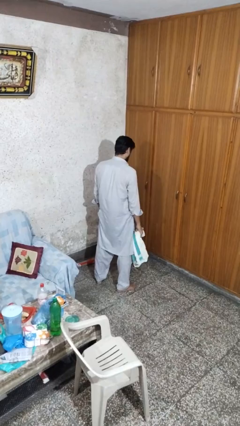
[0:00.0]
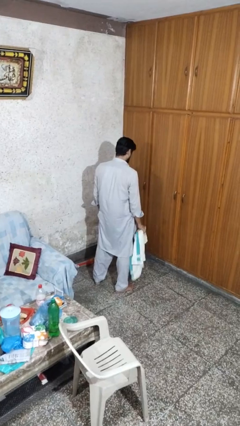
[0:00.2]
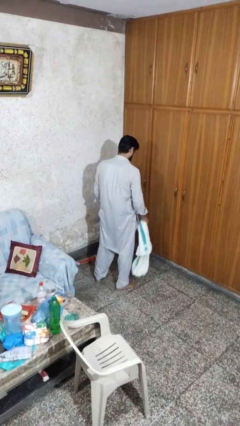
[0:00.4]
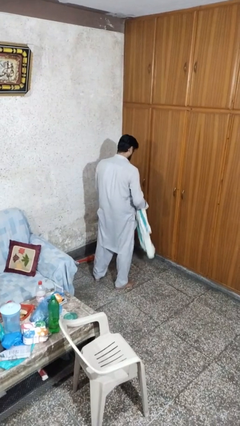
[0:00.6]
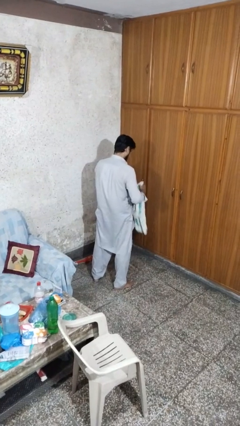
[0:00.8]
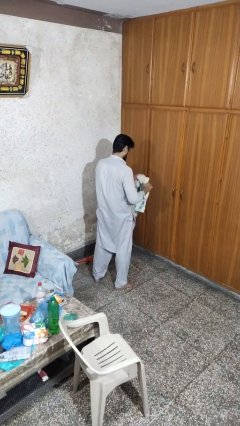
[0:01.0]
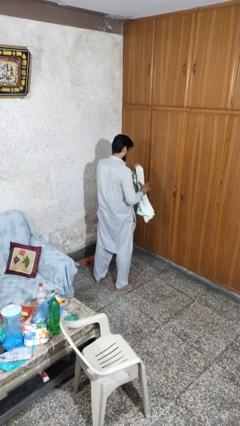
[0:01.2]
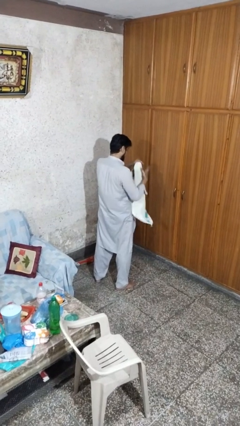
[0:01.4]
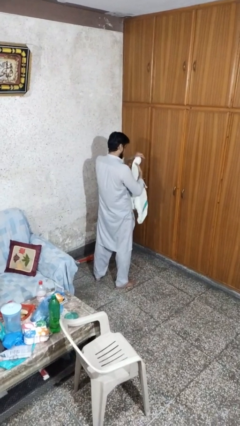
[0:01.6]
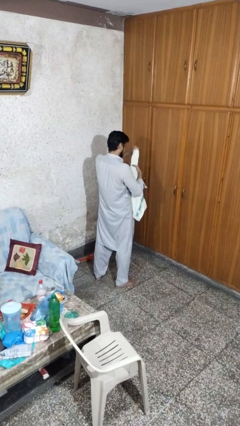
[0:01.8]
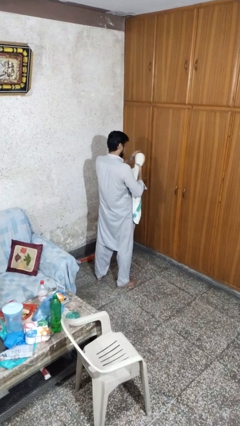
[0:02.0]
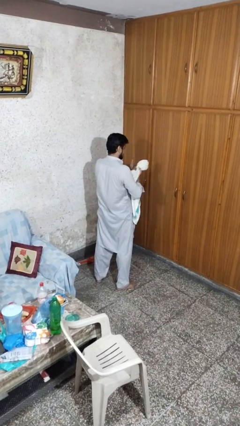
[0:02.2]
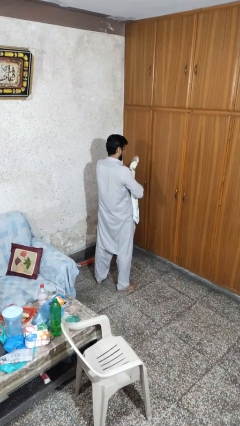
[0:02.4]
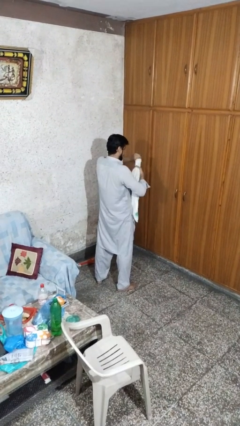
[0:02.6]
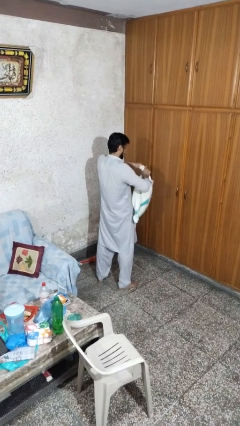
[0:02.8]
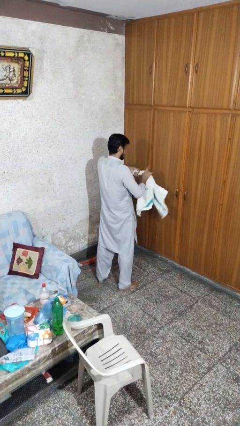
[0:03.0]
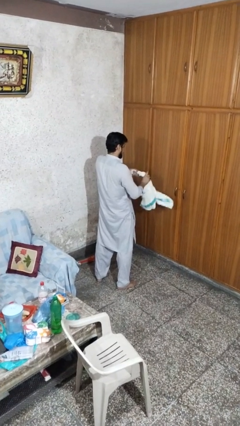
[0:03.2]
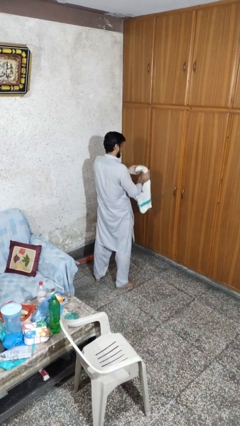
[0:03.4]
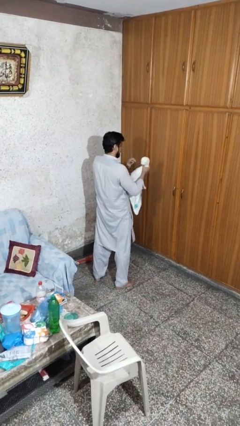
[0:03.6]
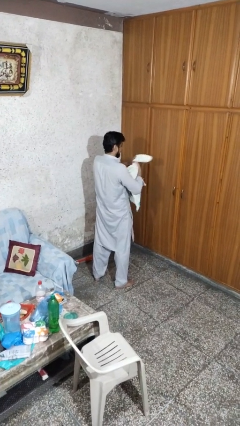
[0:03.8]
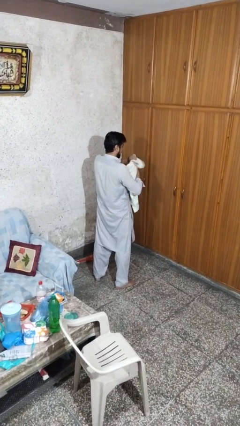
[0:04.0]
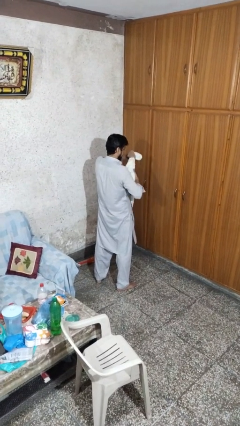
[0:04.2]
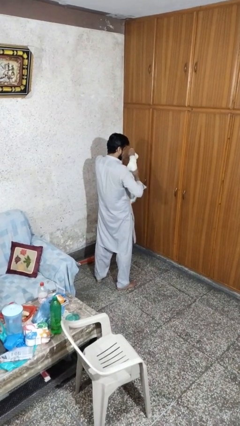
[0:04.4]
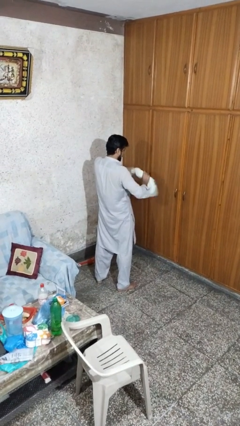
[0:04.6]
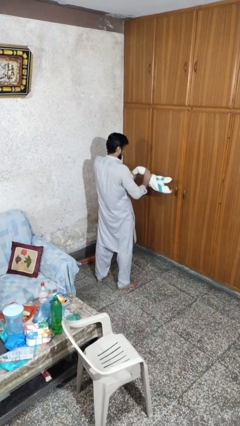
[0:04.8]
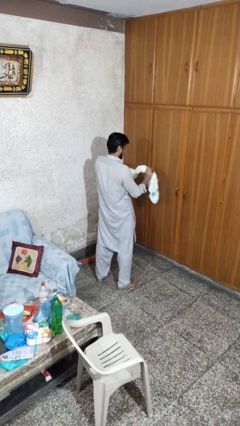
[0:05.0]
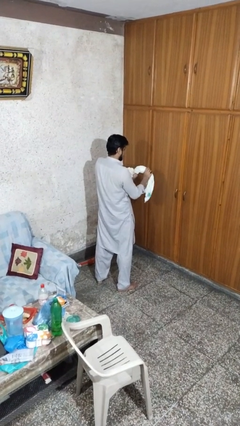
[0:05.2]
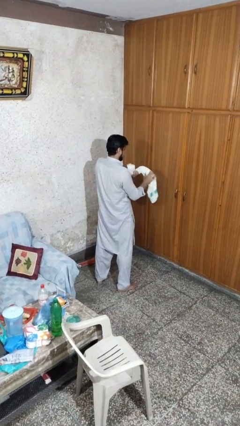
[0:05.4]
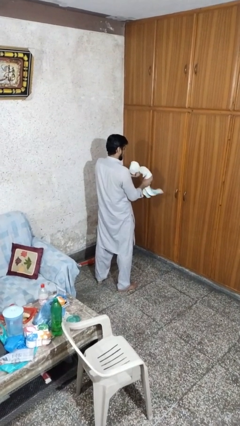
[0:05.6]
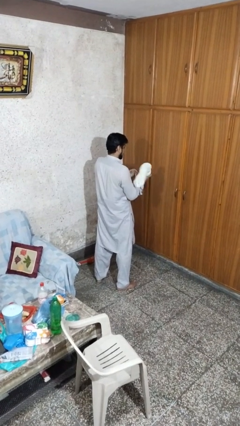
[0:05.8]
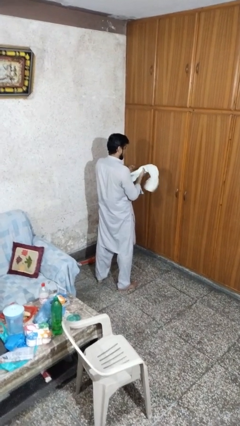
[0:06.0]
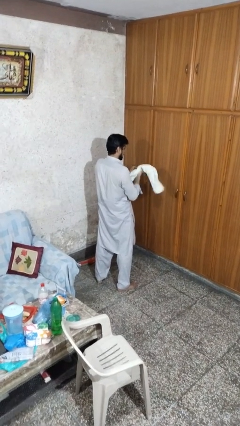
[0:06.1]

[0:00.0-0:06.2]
person squeezes object

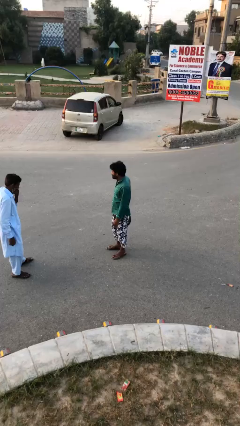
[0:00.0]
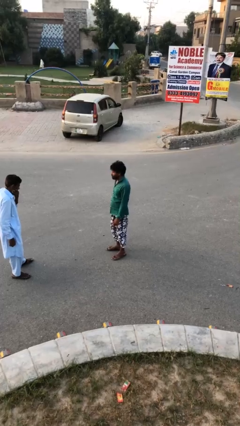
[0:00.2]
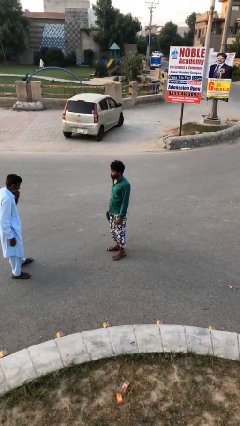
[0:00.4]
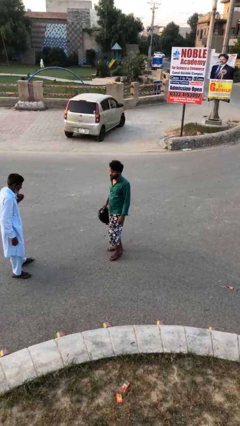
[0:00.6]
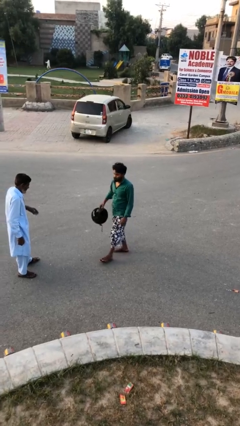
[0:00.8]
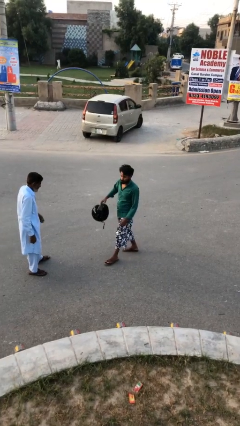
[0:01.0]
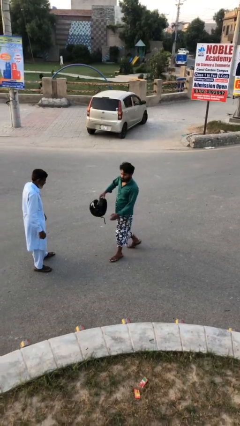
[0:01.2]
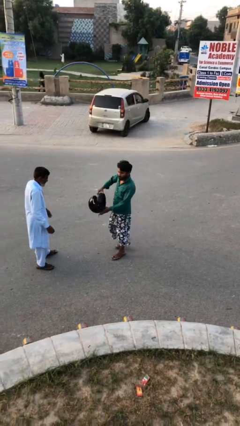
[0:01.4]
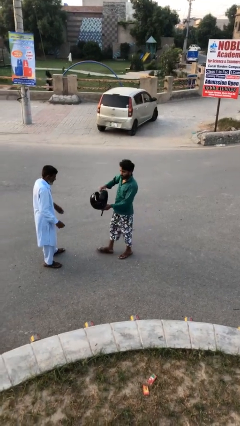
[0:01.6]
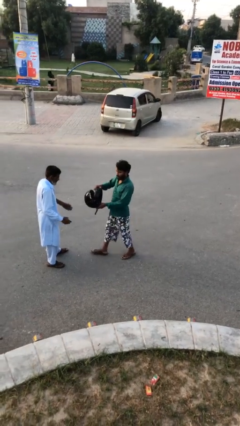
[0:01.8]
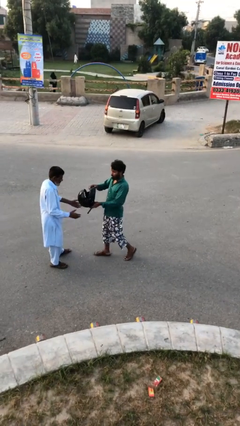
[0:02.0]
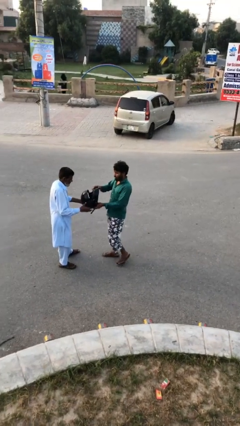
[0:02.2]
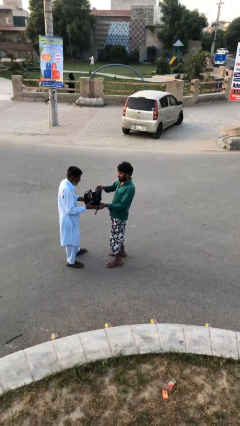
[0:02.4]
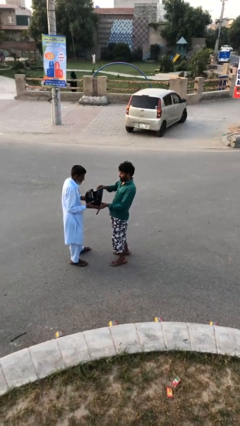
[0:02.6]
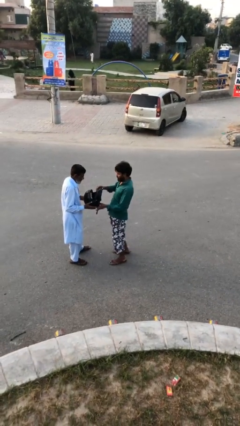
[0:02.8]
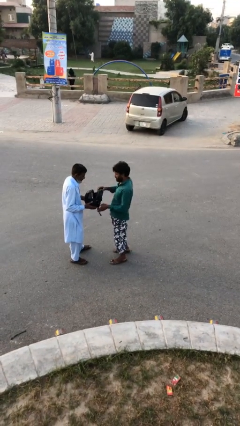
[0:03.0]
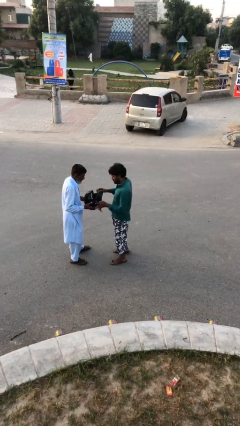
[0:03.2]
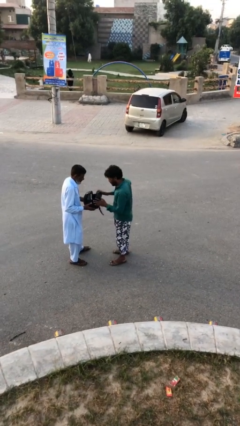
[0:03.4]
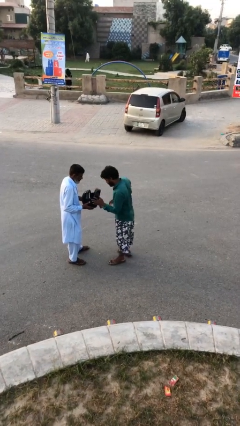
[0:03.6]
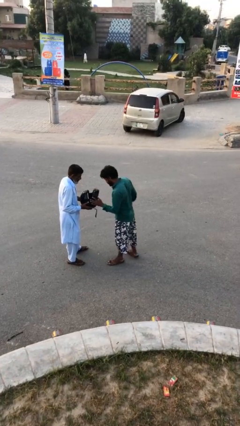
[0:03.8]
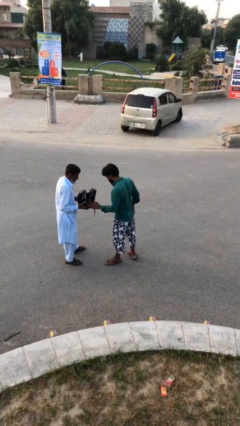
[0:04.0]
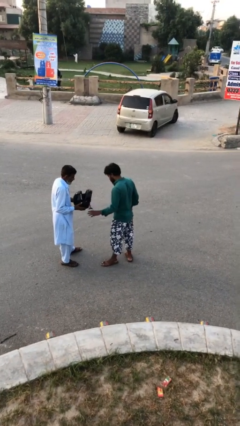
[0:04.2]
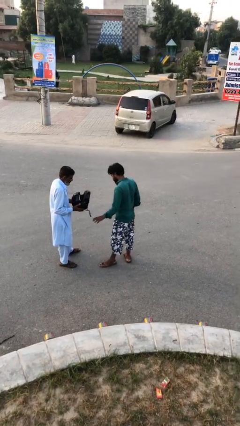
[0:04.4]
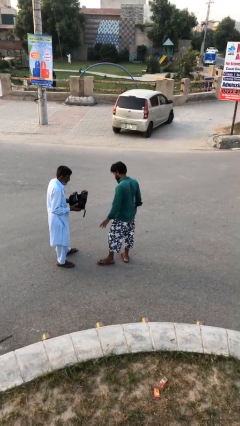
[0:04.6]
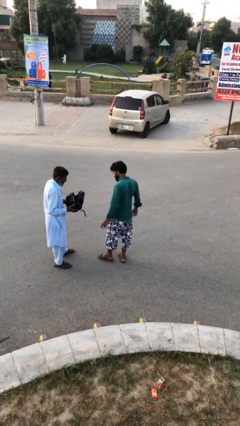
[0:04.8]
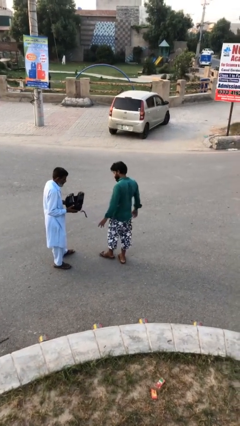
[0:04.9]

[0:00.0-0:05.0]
person transfers object to person

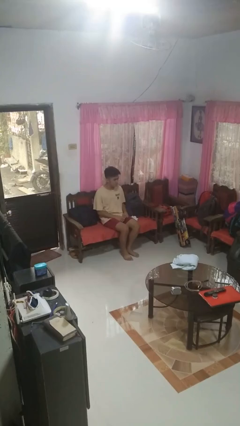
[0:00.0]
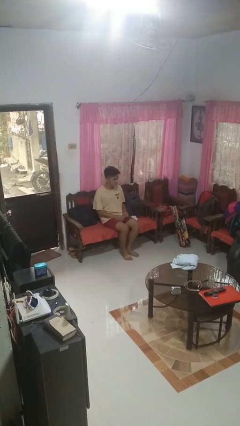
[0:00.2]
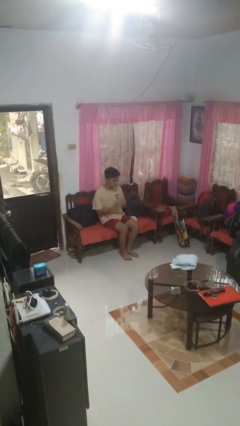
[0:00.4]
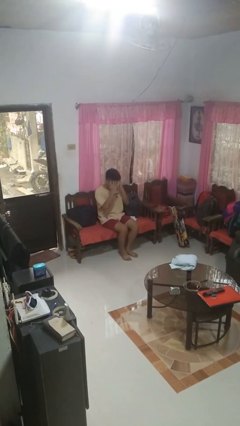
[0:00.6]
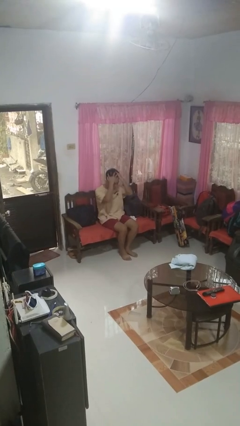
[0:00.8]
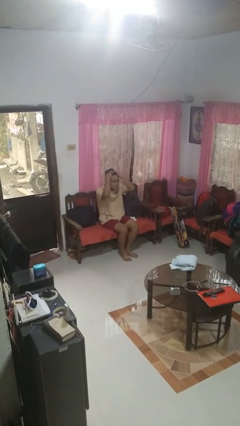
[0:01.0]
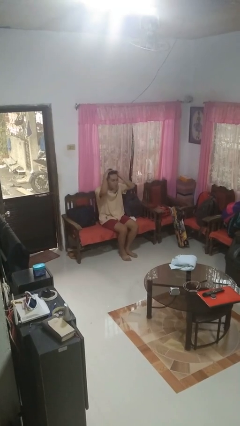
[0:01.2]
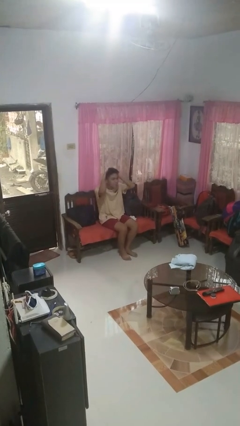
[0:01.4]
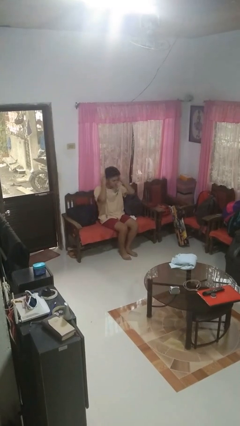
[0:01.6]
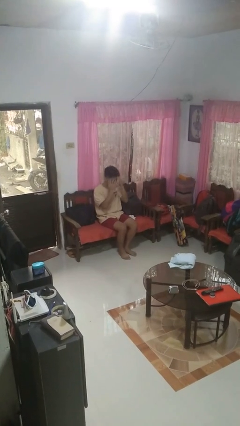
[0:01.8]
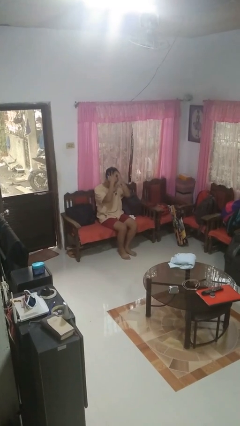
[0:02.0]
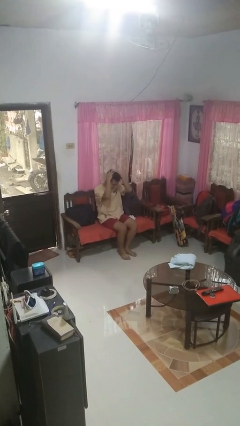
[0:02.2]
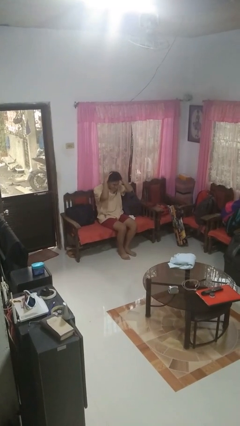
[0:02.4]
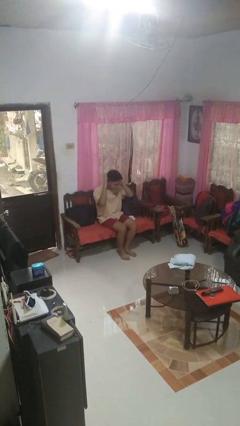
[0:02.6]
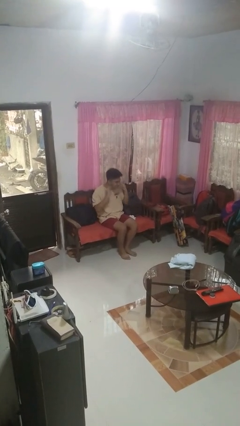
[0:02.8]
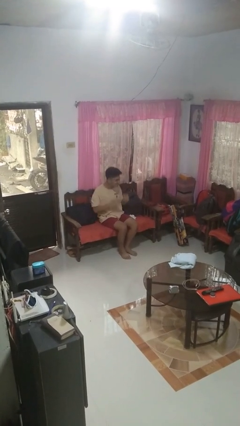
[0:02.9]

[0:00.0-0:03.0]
person strokes hair

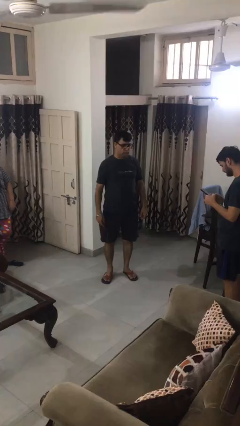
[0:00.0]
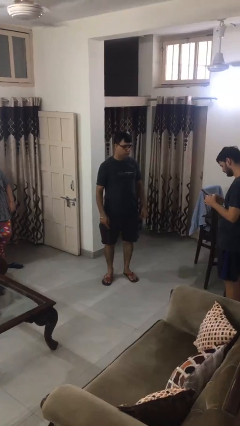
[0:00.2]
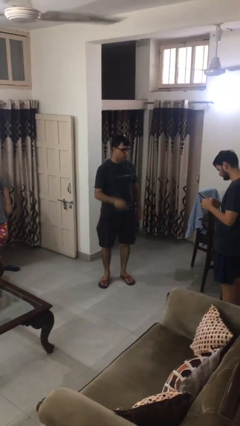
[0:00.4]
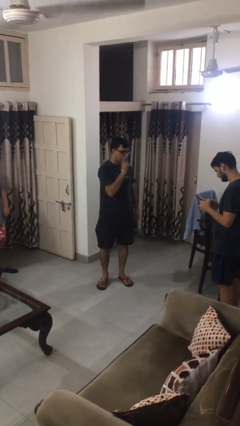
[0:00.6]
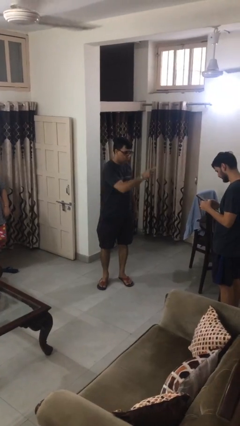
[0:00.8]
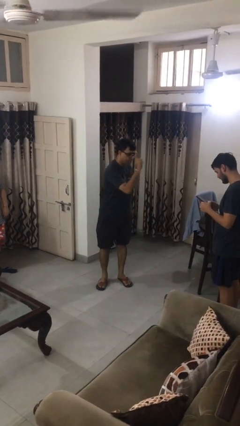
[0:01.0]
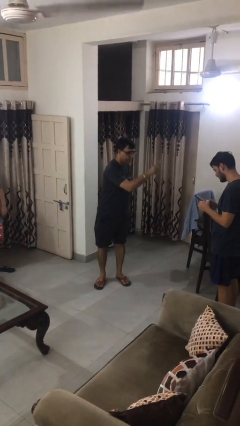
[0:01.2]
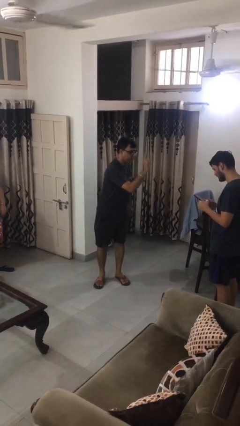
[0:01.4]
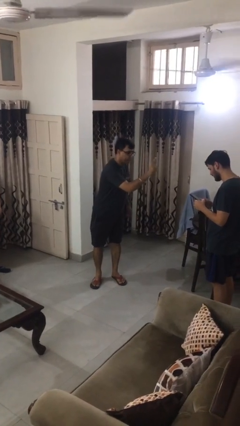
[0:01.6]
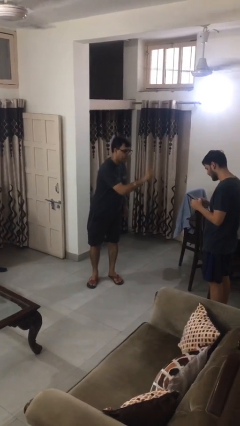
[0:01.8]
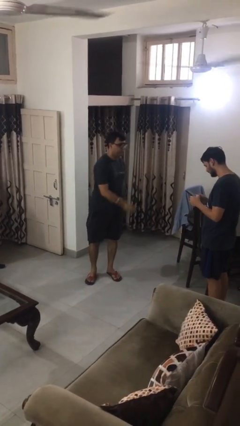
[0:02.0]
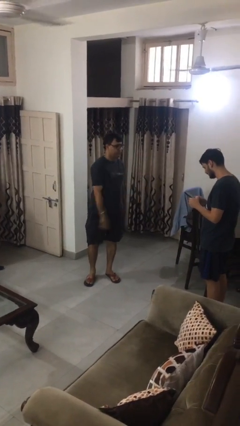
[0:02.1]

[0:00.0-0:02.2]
person points at person

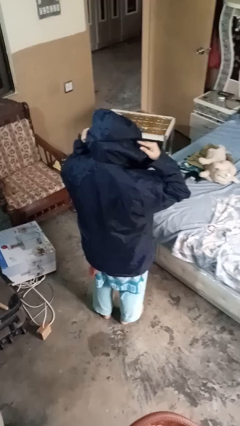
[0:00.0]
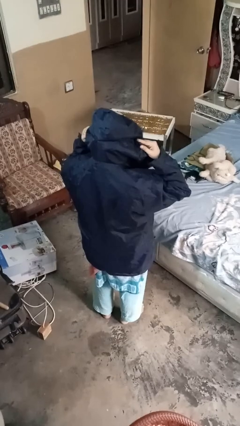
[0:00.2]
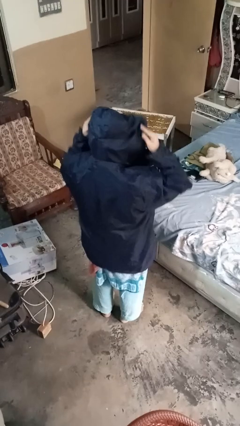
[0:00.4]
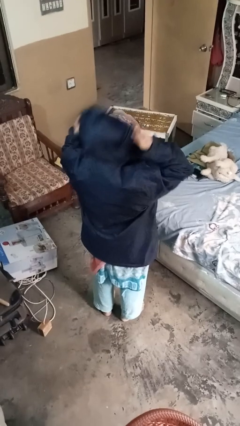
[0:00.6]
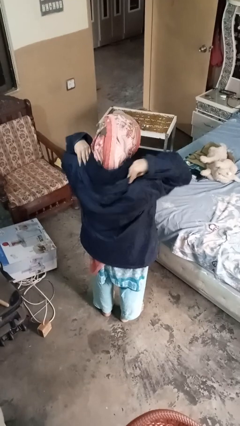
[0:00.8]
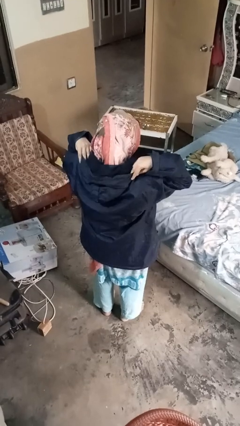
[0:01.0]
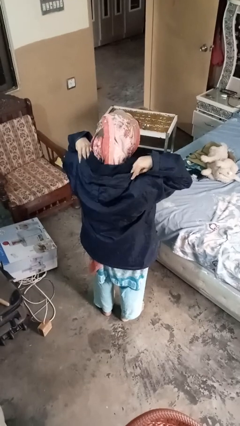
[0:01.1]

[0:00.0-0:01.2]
person takes off hoodie

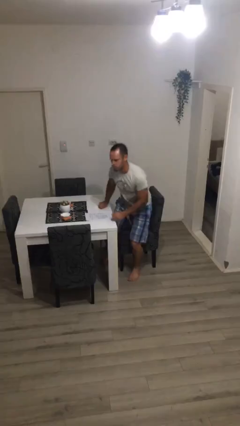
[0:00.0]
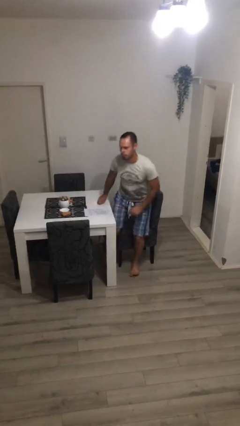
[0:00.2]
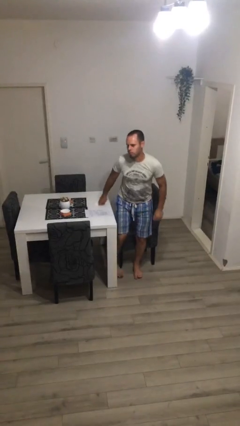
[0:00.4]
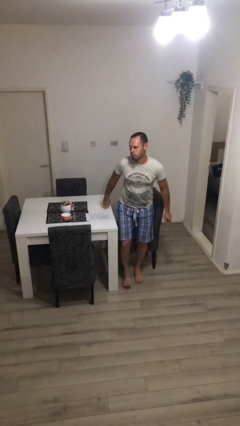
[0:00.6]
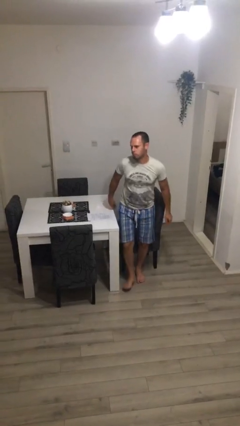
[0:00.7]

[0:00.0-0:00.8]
person stands up
